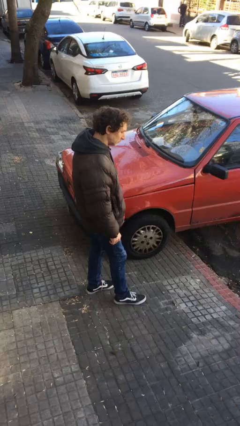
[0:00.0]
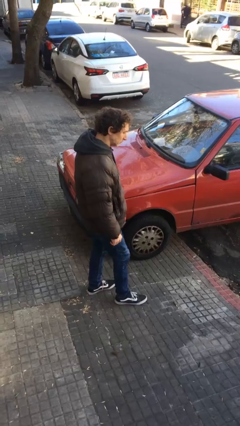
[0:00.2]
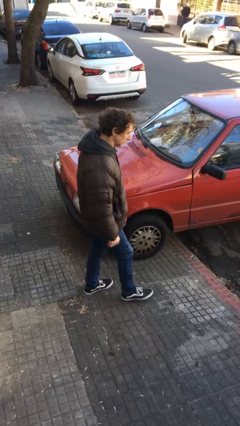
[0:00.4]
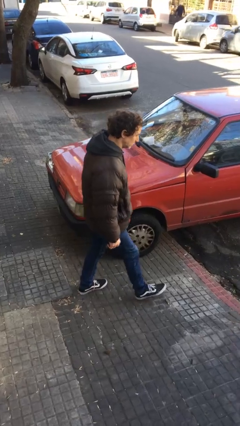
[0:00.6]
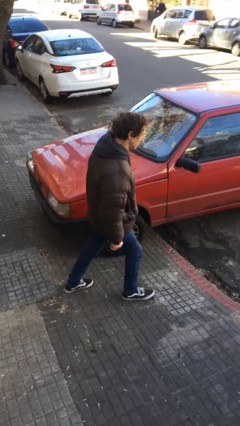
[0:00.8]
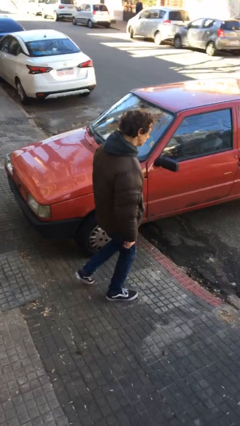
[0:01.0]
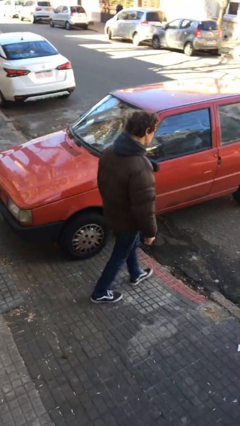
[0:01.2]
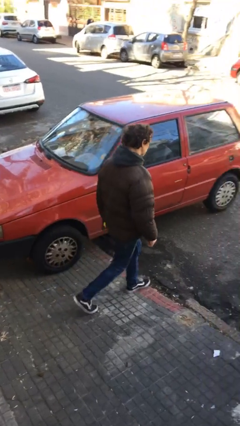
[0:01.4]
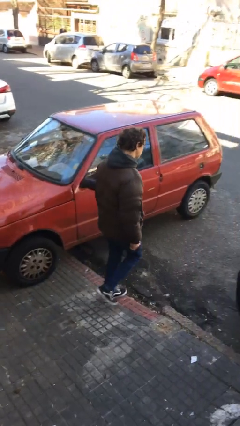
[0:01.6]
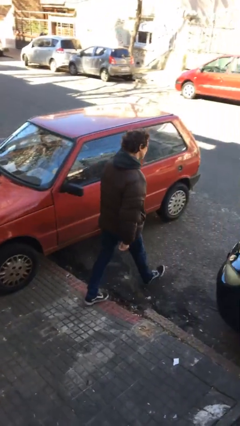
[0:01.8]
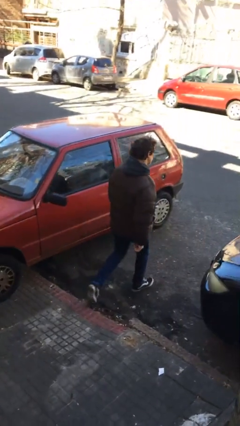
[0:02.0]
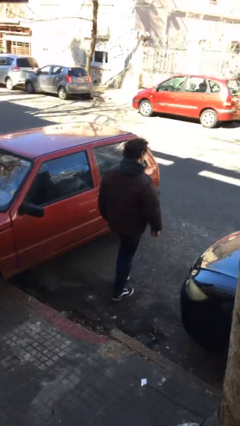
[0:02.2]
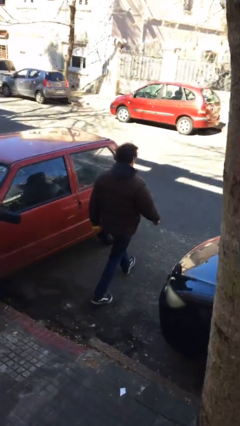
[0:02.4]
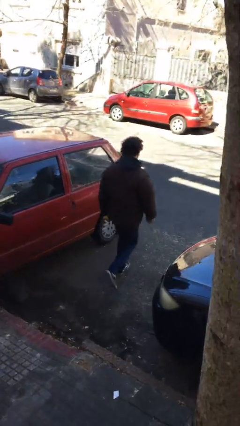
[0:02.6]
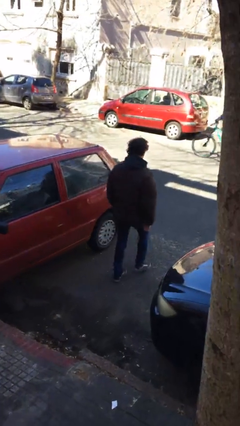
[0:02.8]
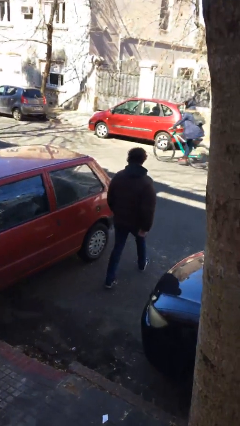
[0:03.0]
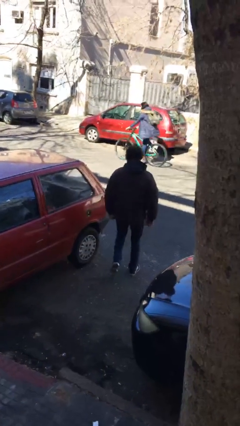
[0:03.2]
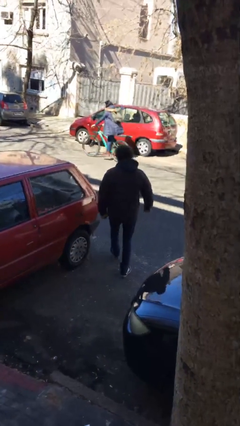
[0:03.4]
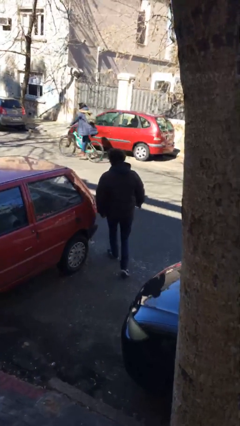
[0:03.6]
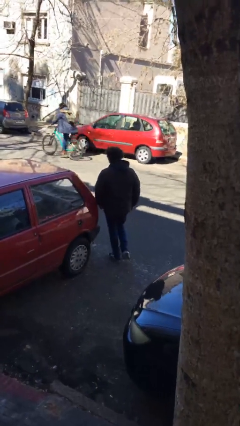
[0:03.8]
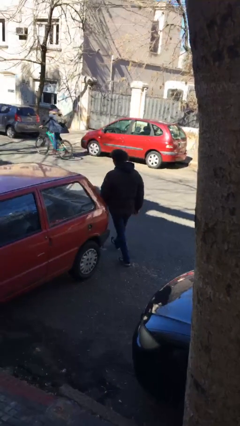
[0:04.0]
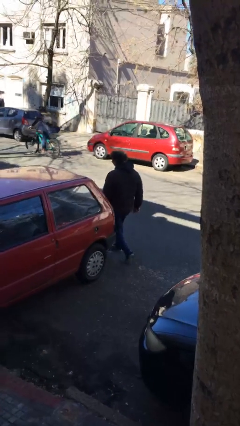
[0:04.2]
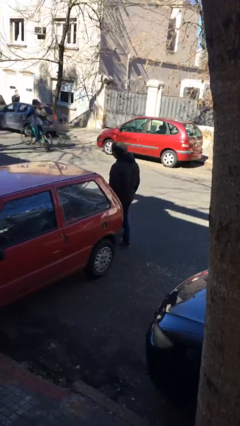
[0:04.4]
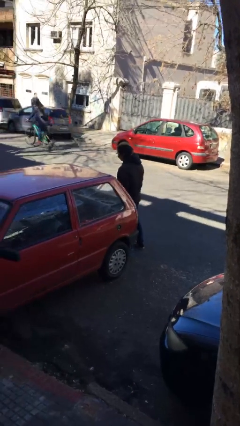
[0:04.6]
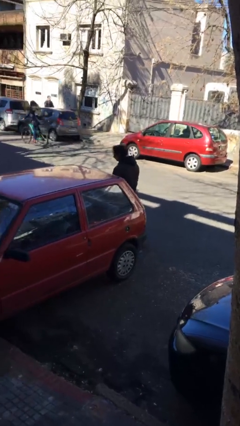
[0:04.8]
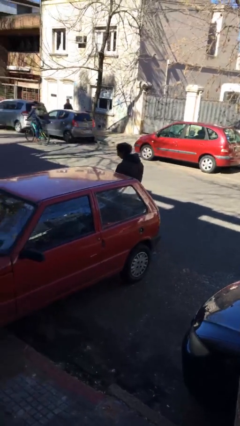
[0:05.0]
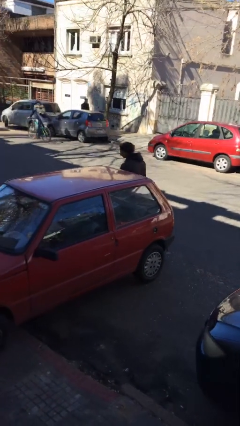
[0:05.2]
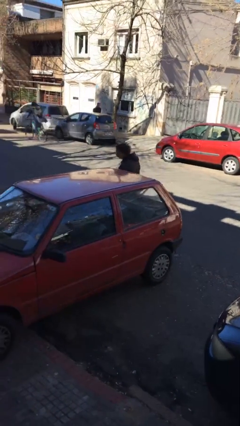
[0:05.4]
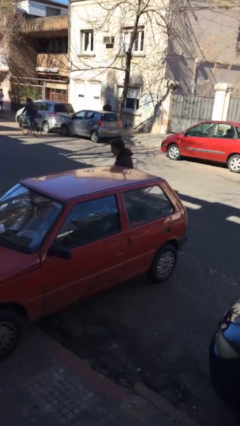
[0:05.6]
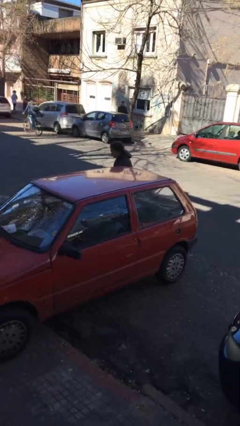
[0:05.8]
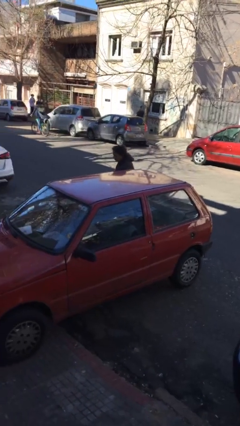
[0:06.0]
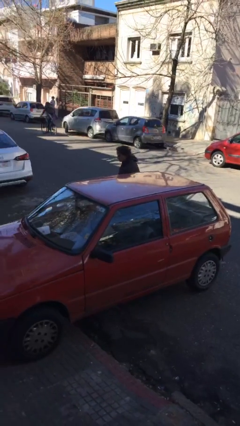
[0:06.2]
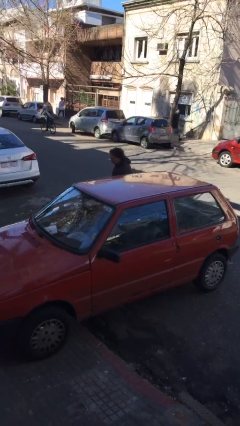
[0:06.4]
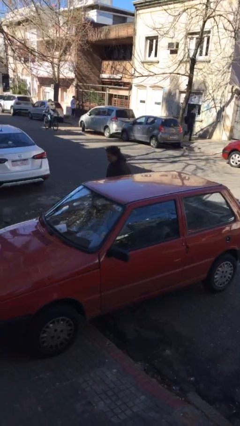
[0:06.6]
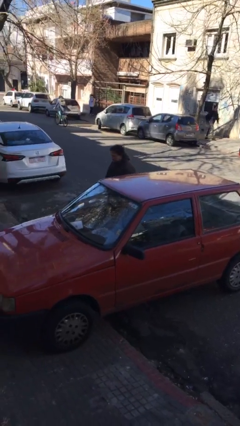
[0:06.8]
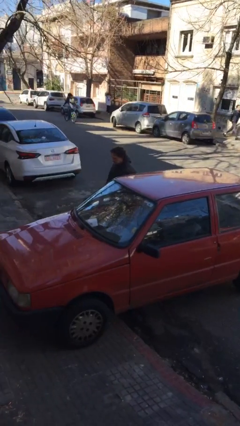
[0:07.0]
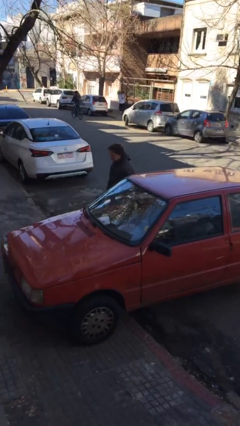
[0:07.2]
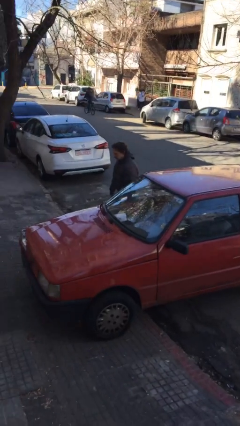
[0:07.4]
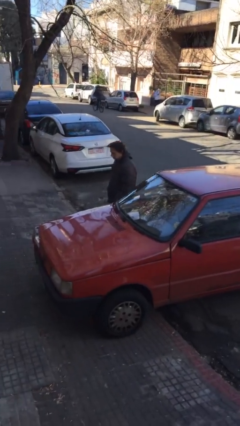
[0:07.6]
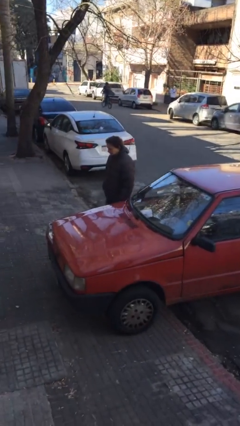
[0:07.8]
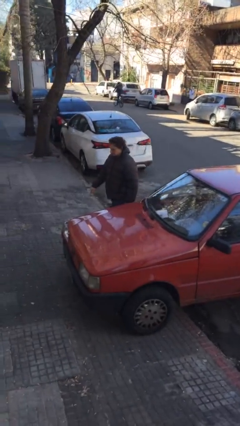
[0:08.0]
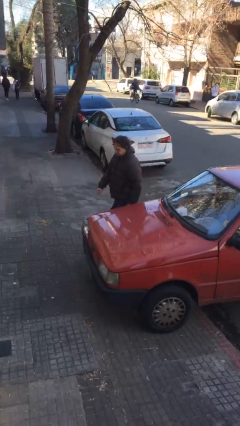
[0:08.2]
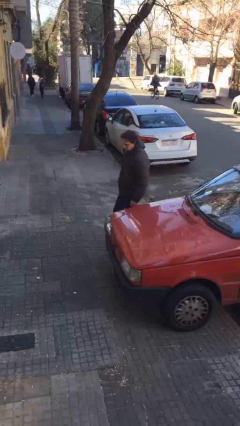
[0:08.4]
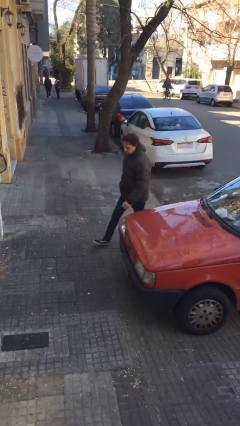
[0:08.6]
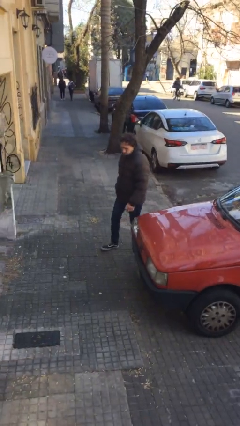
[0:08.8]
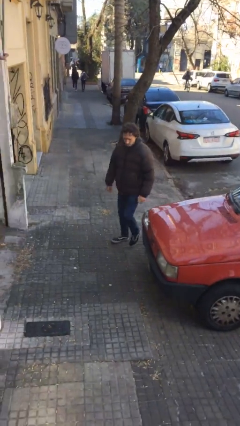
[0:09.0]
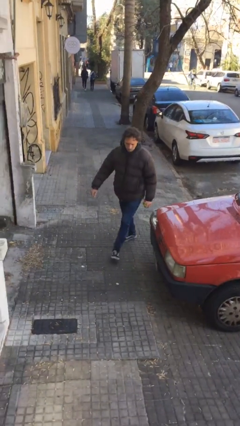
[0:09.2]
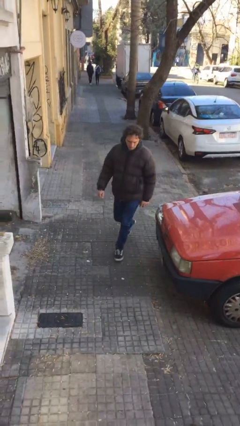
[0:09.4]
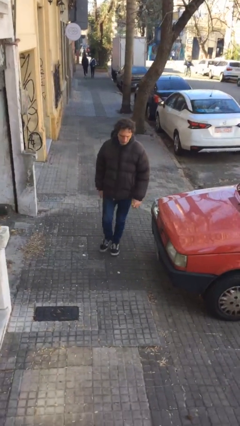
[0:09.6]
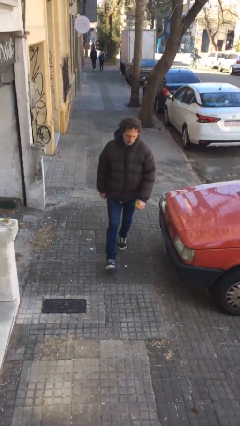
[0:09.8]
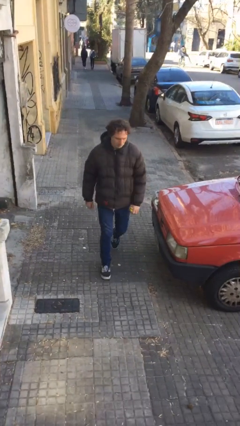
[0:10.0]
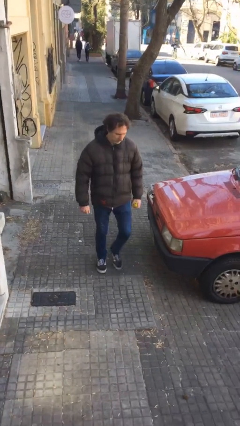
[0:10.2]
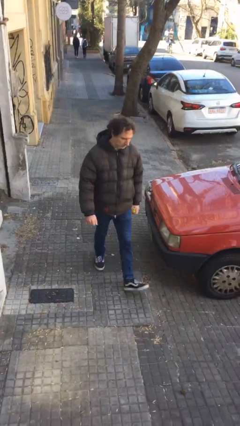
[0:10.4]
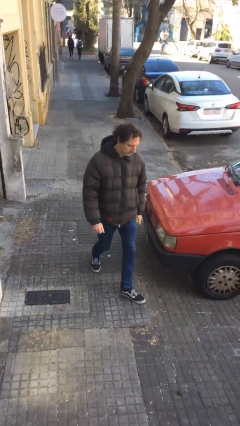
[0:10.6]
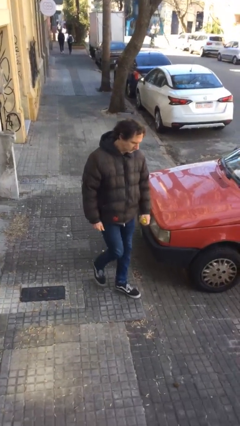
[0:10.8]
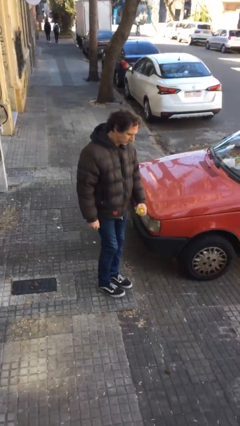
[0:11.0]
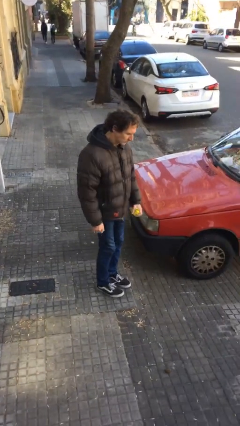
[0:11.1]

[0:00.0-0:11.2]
person walks around car

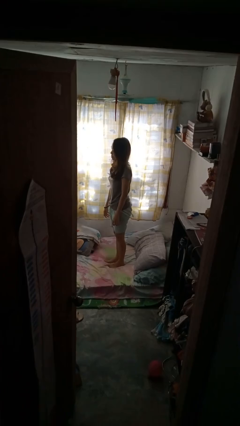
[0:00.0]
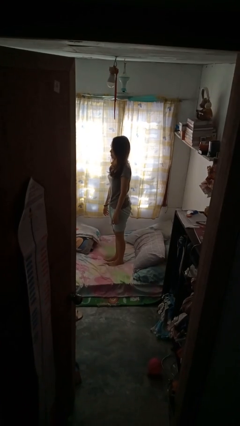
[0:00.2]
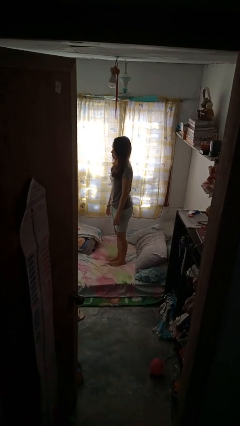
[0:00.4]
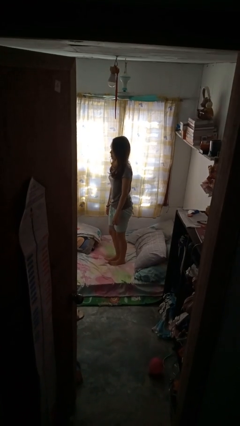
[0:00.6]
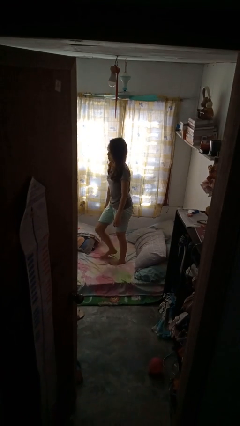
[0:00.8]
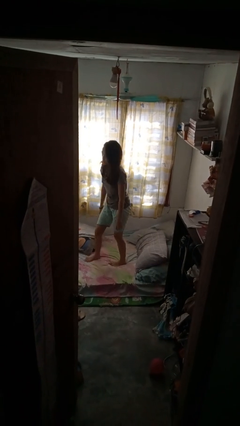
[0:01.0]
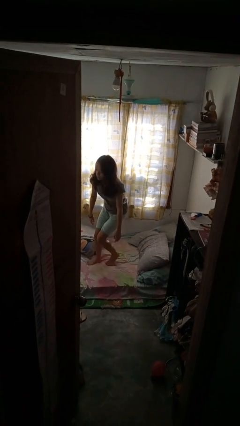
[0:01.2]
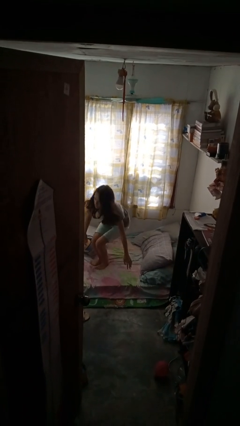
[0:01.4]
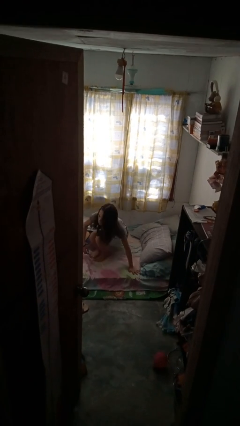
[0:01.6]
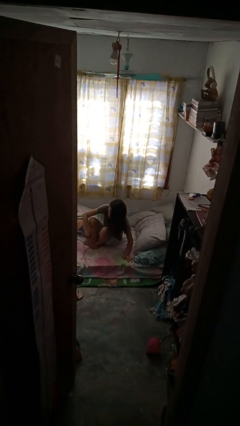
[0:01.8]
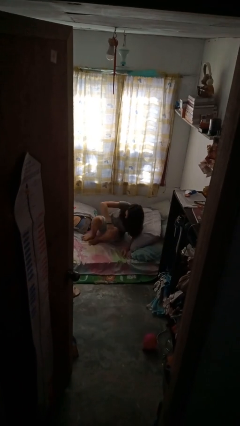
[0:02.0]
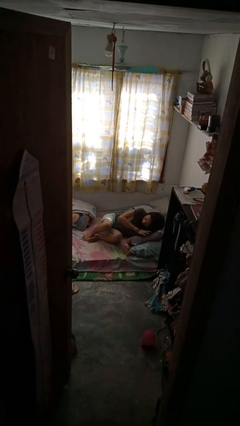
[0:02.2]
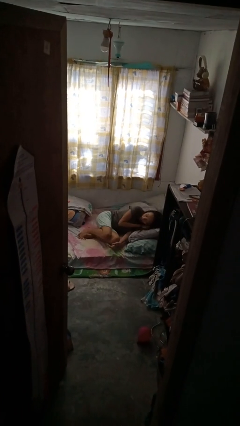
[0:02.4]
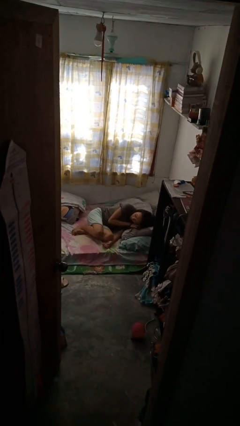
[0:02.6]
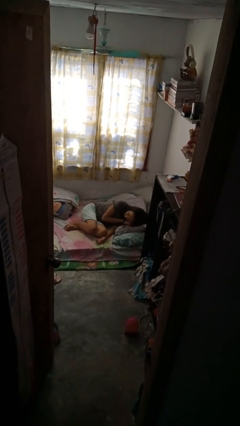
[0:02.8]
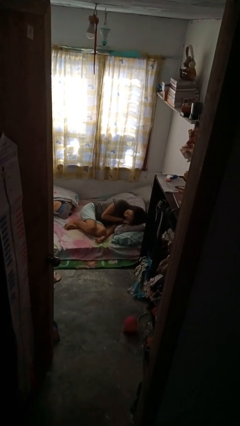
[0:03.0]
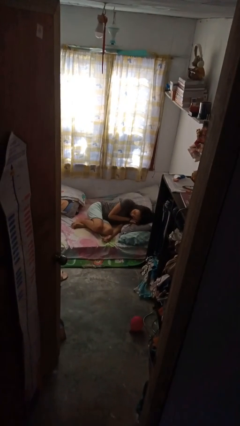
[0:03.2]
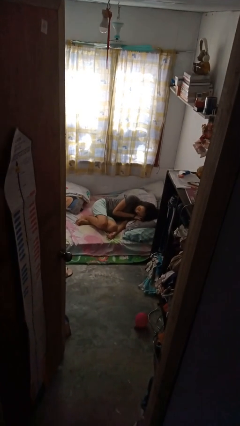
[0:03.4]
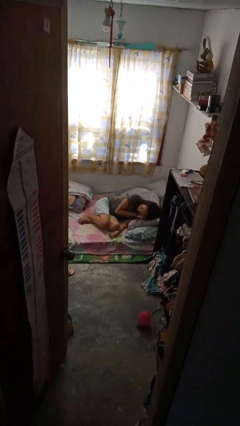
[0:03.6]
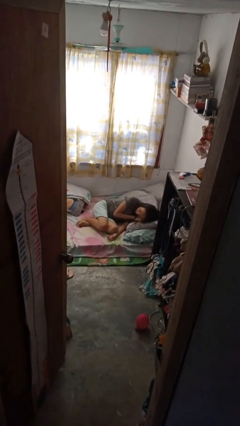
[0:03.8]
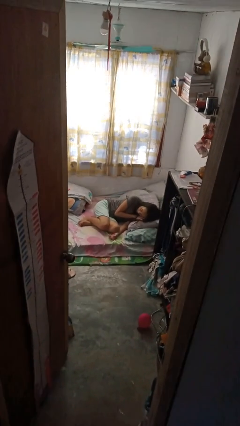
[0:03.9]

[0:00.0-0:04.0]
person lies down on bed

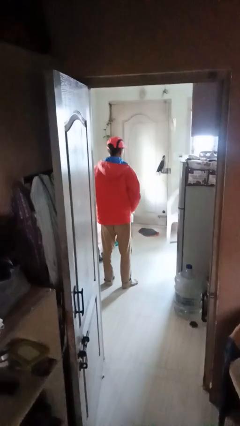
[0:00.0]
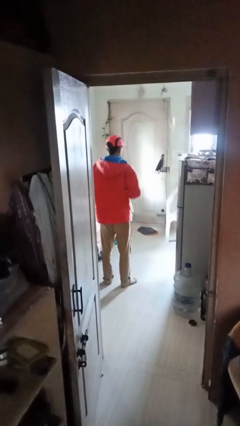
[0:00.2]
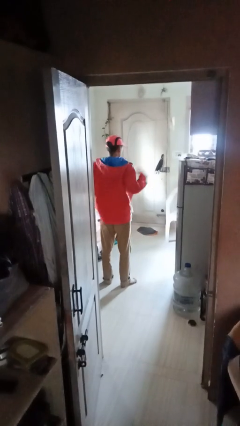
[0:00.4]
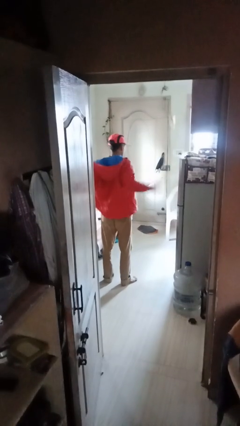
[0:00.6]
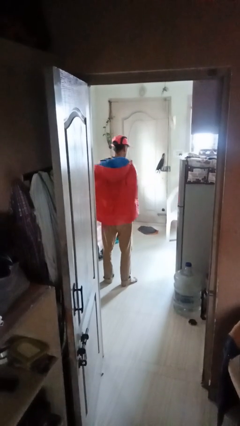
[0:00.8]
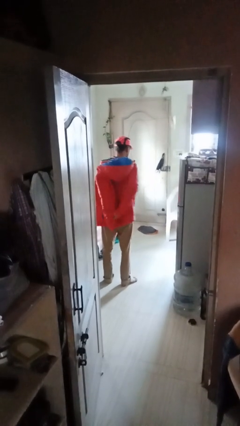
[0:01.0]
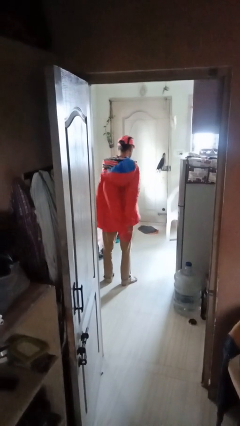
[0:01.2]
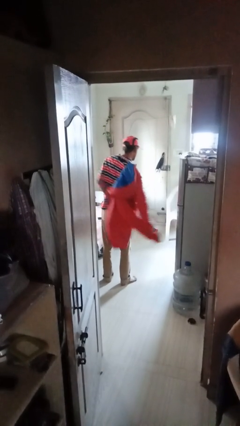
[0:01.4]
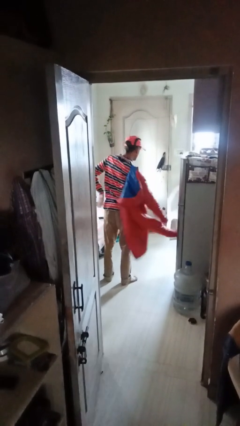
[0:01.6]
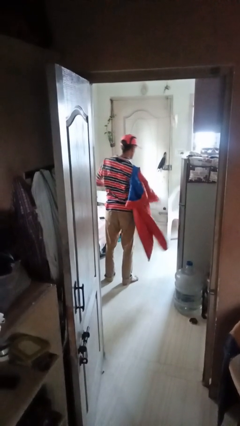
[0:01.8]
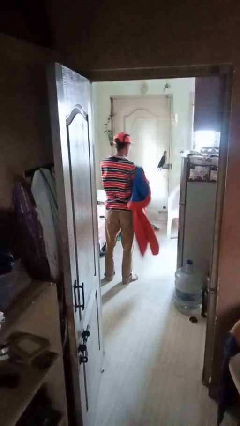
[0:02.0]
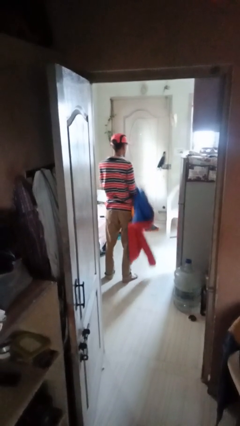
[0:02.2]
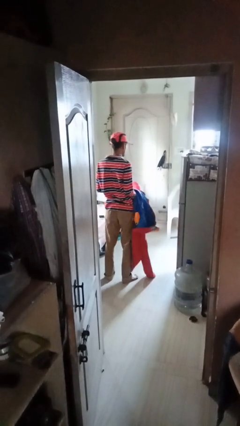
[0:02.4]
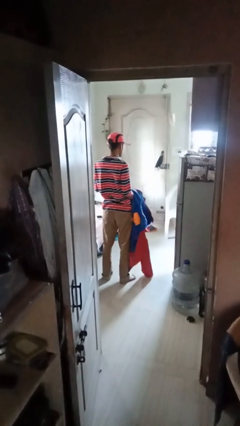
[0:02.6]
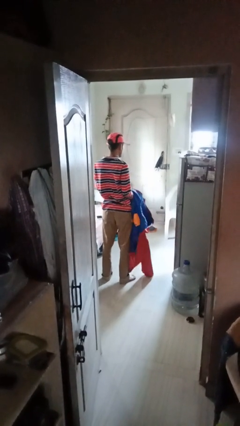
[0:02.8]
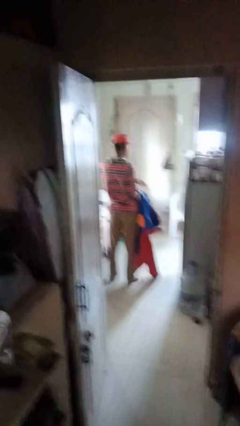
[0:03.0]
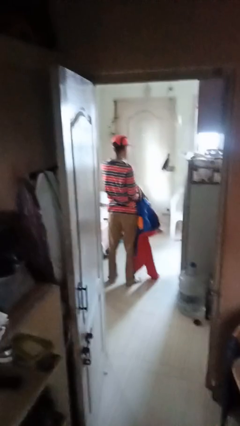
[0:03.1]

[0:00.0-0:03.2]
person takes off jacket
